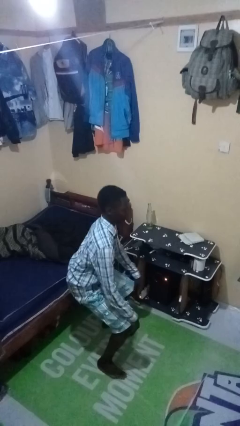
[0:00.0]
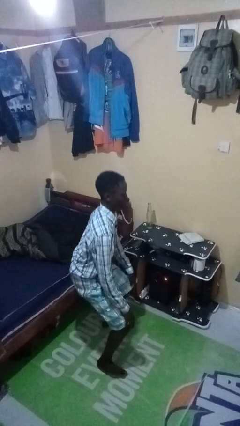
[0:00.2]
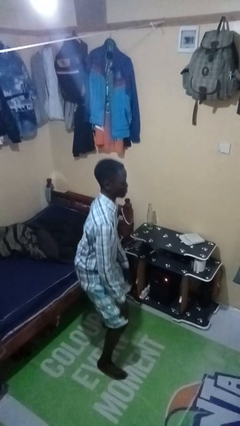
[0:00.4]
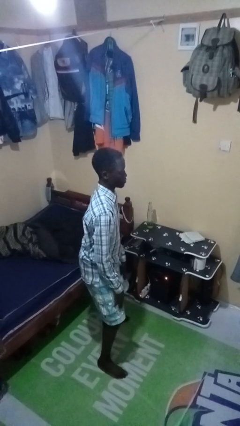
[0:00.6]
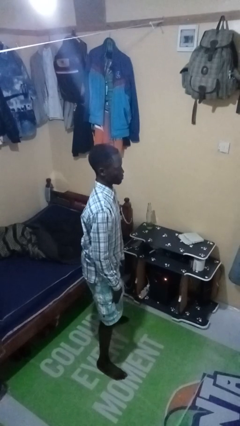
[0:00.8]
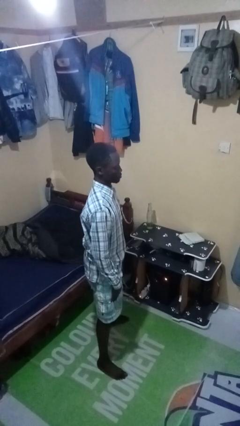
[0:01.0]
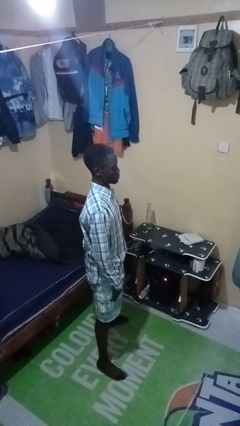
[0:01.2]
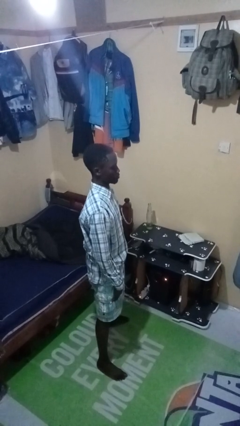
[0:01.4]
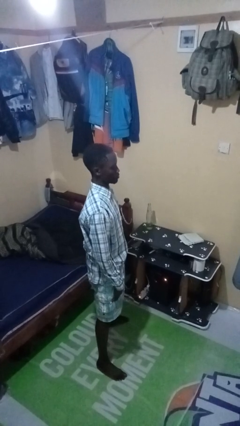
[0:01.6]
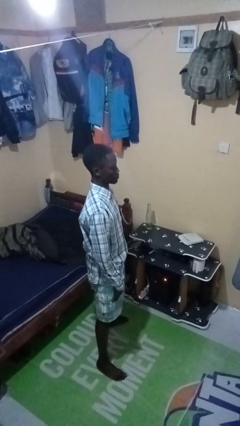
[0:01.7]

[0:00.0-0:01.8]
person stands up

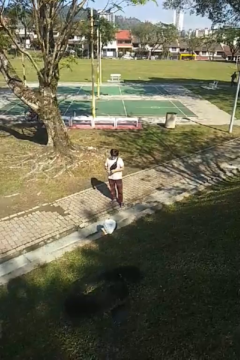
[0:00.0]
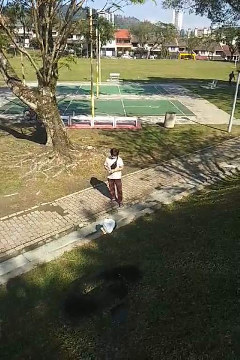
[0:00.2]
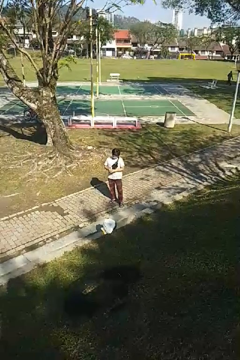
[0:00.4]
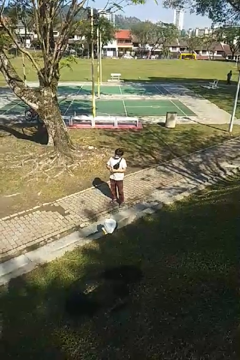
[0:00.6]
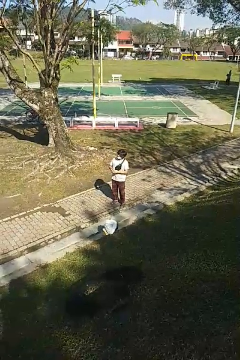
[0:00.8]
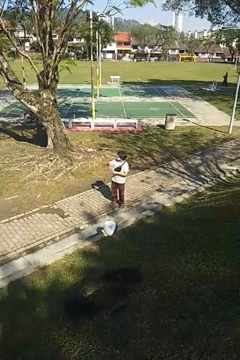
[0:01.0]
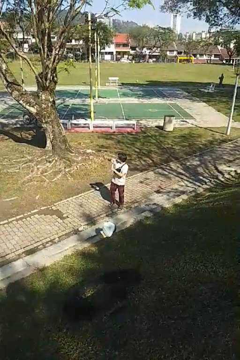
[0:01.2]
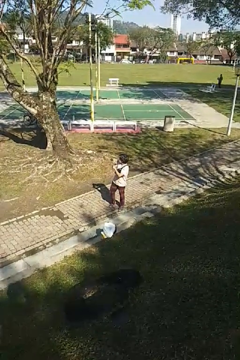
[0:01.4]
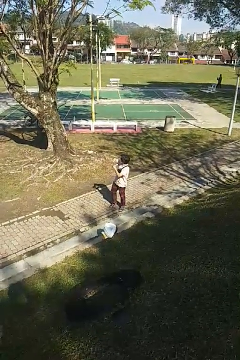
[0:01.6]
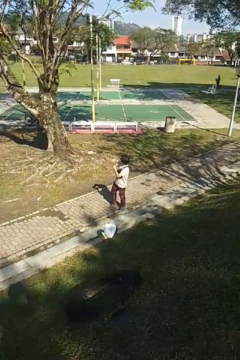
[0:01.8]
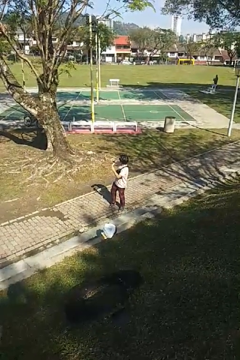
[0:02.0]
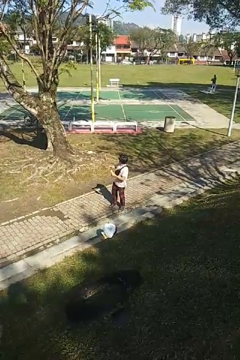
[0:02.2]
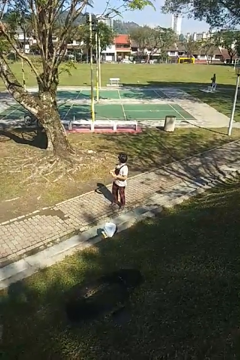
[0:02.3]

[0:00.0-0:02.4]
person applies deodorant

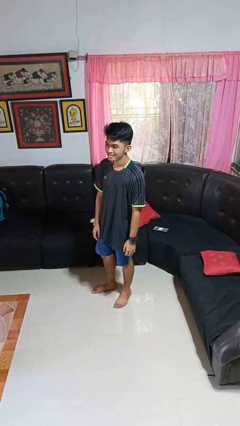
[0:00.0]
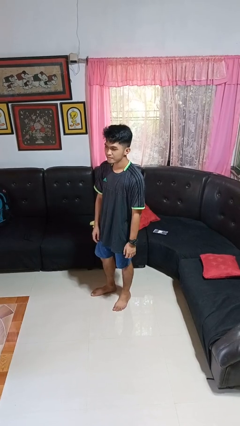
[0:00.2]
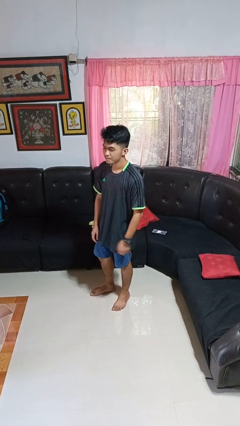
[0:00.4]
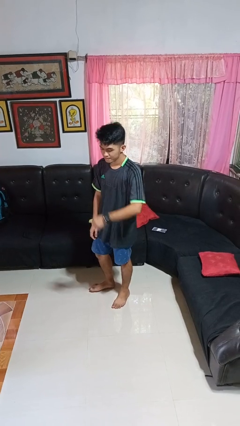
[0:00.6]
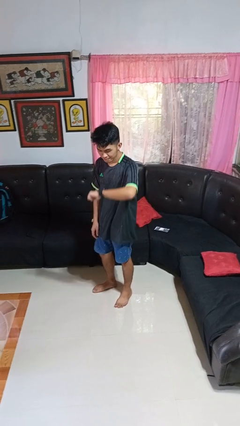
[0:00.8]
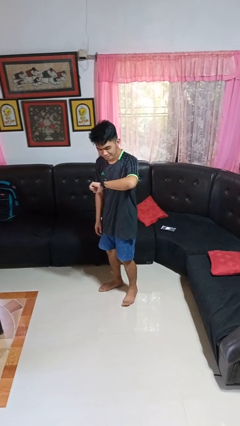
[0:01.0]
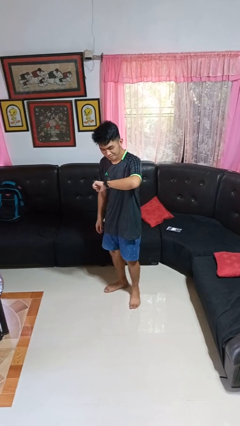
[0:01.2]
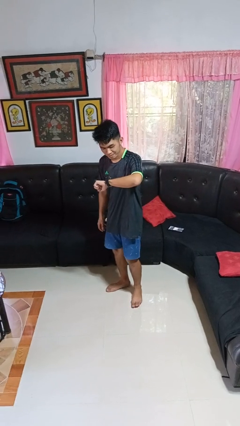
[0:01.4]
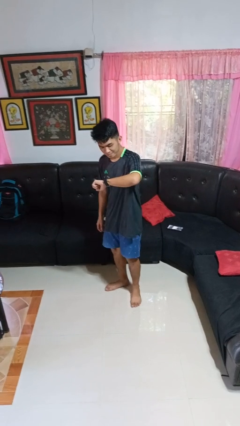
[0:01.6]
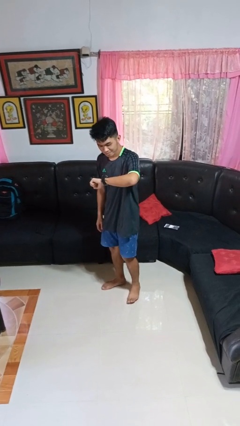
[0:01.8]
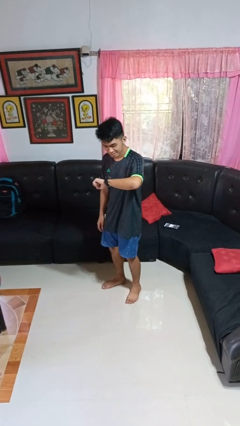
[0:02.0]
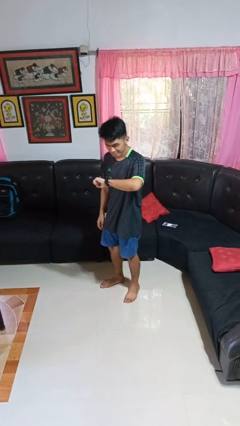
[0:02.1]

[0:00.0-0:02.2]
person looks at wristwatch

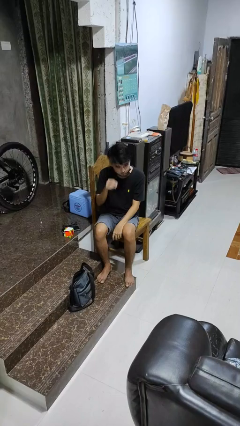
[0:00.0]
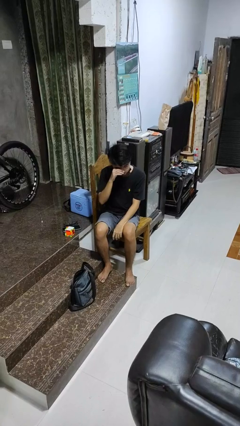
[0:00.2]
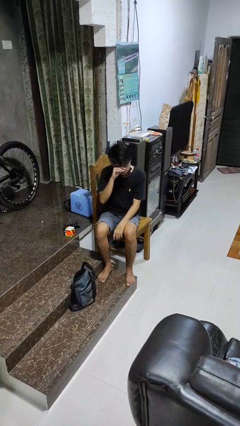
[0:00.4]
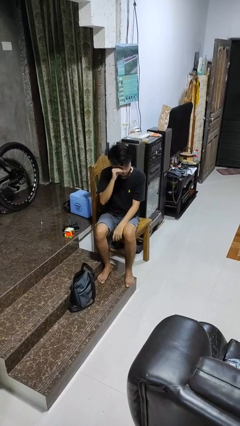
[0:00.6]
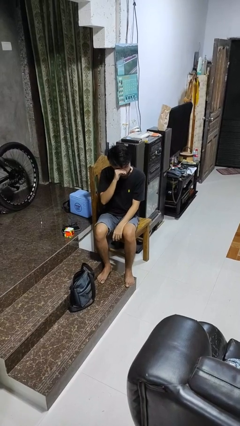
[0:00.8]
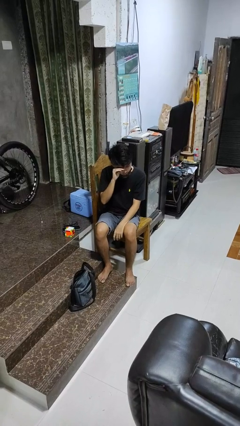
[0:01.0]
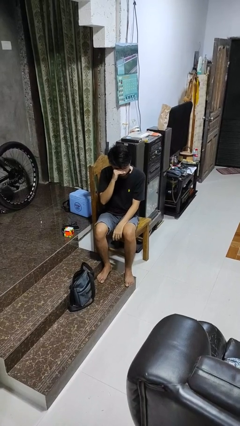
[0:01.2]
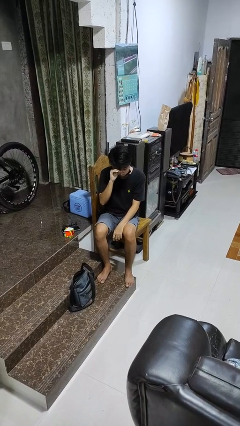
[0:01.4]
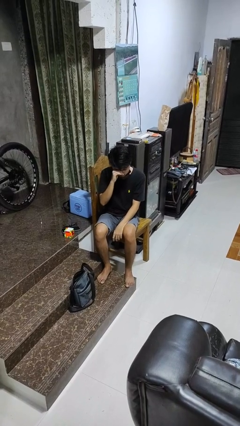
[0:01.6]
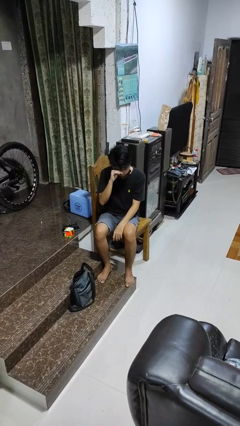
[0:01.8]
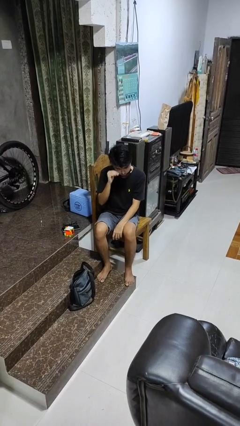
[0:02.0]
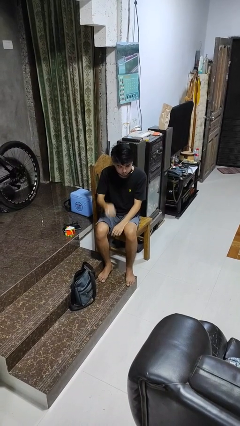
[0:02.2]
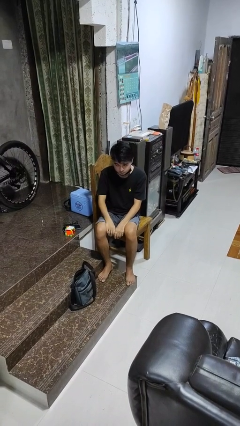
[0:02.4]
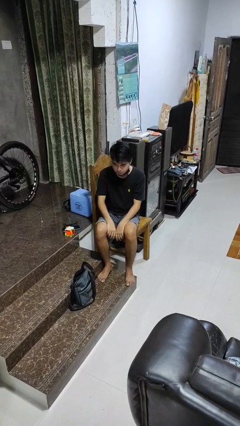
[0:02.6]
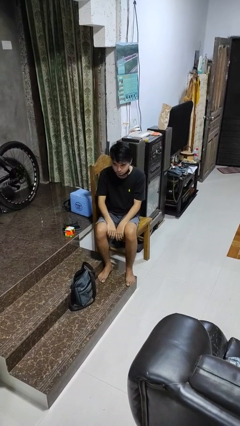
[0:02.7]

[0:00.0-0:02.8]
person rubs eyes

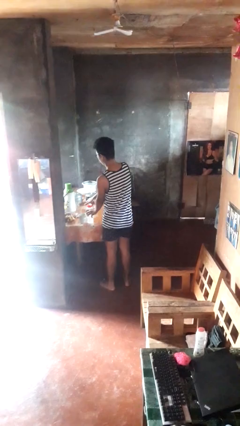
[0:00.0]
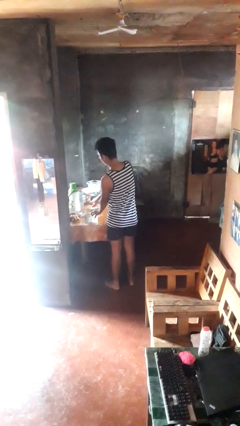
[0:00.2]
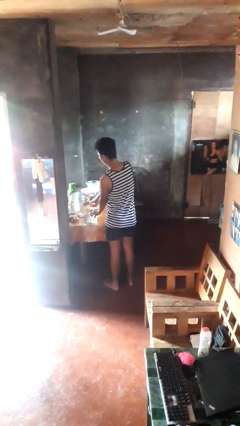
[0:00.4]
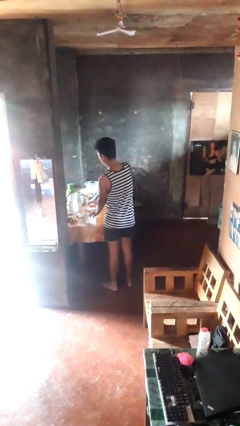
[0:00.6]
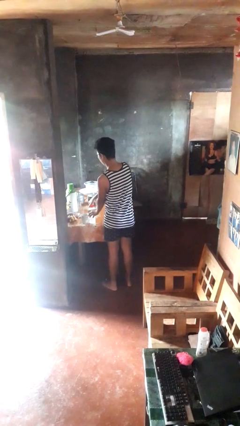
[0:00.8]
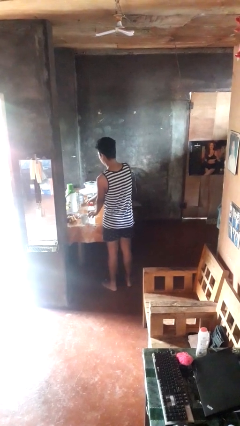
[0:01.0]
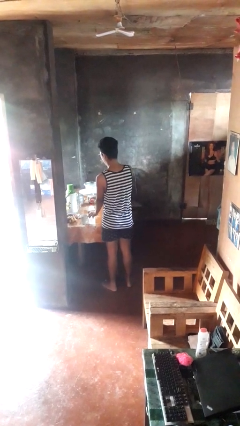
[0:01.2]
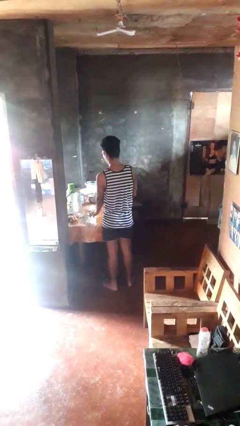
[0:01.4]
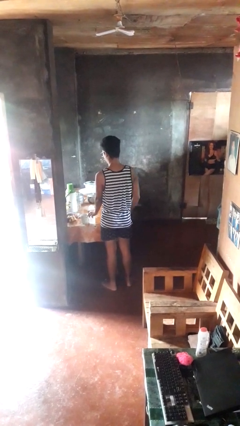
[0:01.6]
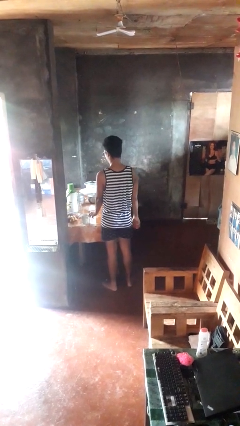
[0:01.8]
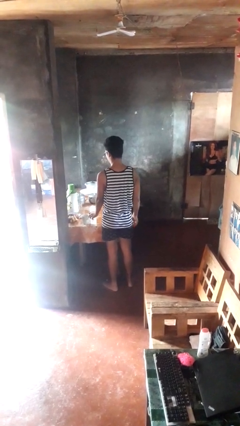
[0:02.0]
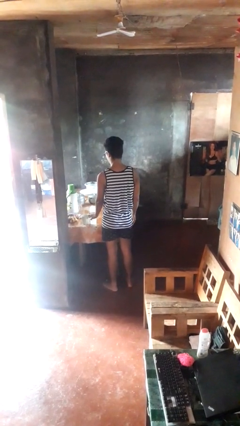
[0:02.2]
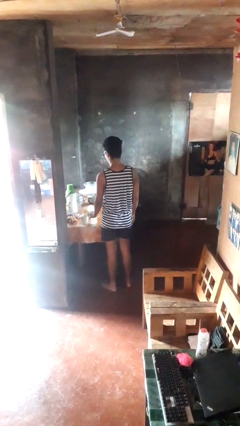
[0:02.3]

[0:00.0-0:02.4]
person unscrews lid from bottle

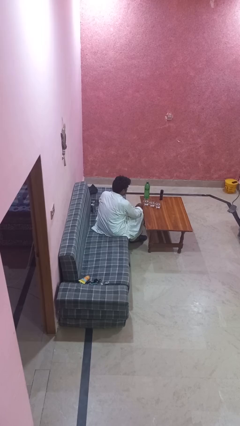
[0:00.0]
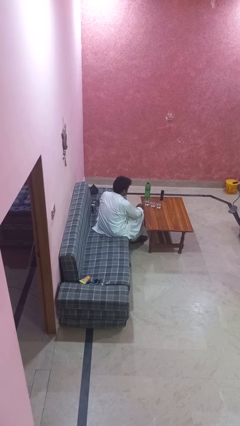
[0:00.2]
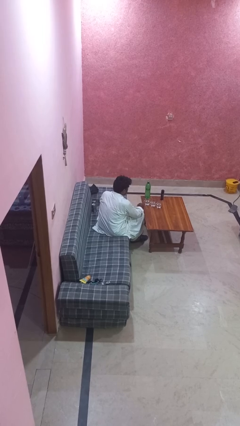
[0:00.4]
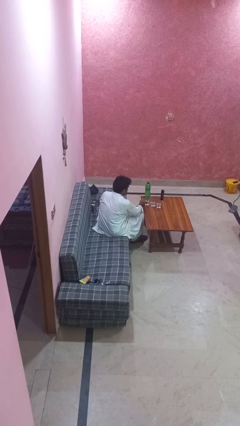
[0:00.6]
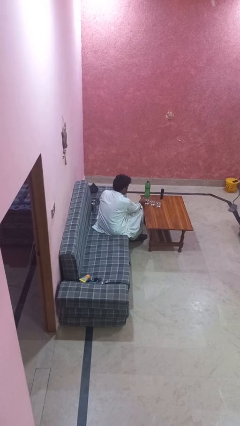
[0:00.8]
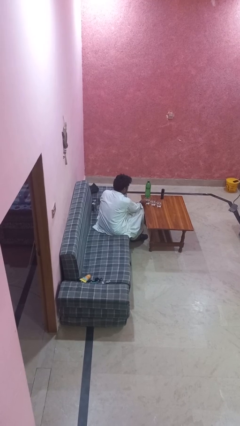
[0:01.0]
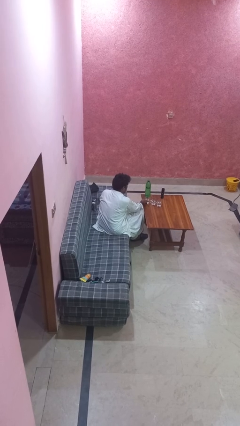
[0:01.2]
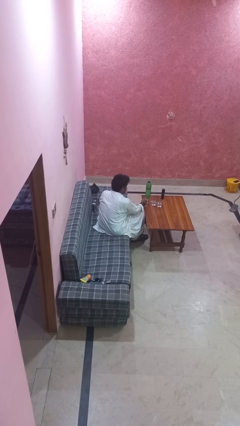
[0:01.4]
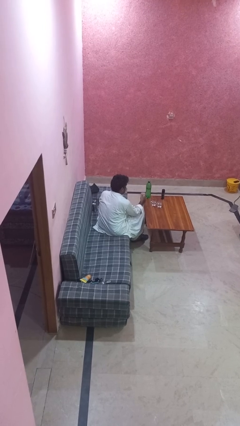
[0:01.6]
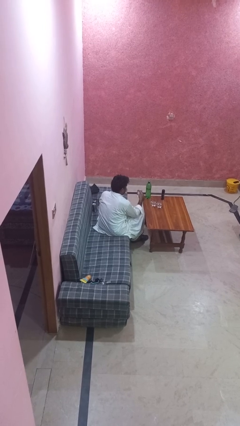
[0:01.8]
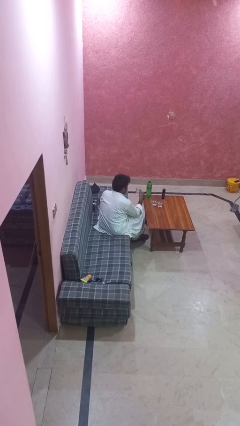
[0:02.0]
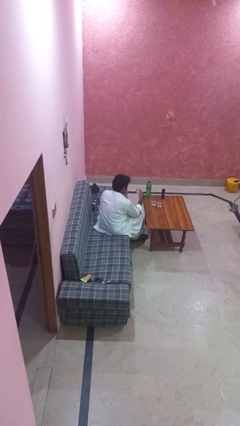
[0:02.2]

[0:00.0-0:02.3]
person picks up object from table

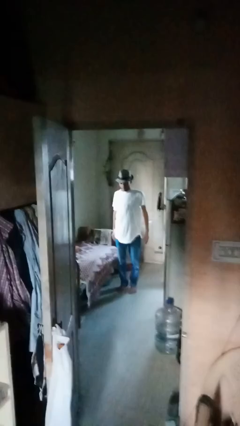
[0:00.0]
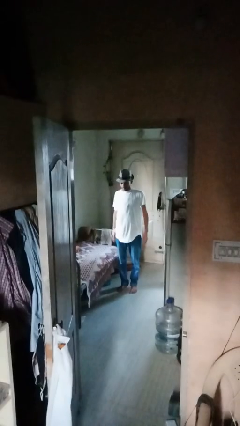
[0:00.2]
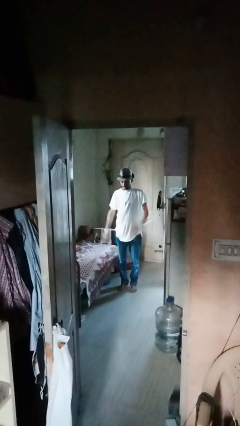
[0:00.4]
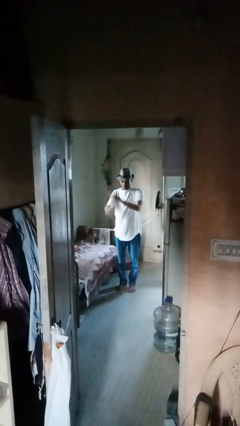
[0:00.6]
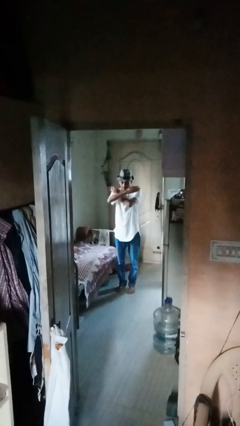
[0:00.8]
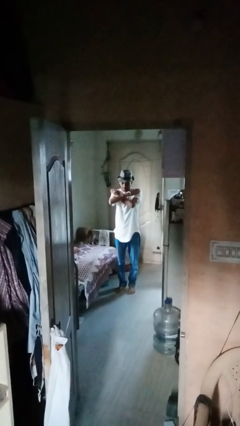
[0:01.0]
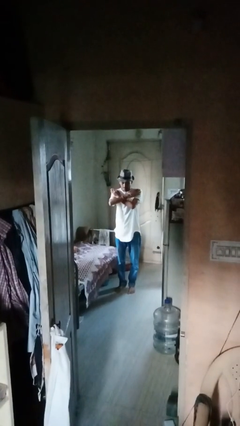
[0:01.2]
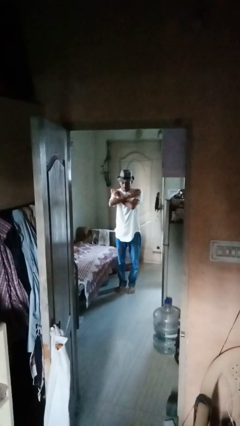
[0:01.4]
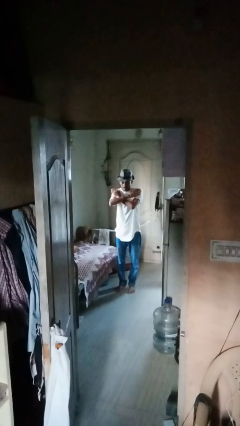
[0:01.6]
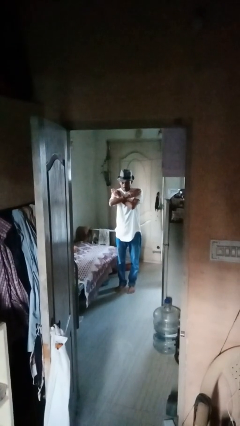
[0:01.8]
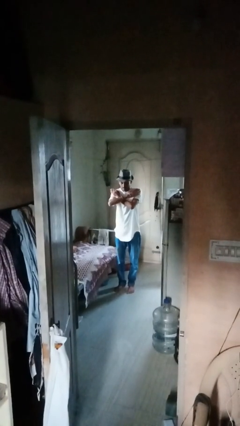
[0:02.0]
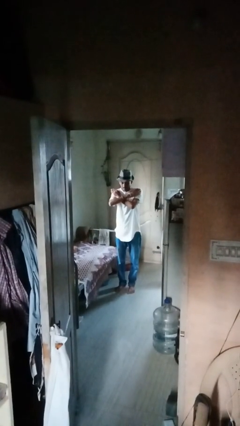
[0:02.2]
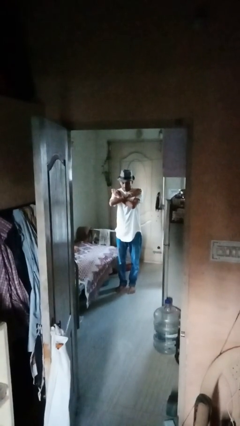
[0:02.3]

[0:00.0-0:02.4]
person gestures arms x

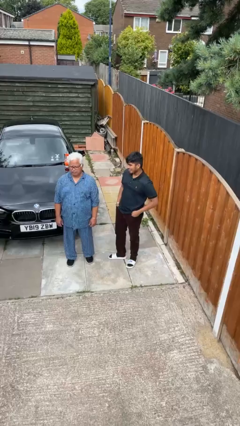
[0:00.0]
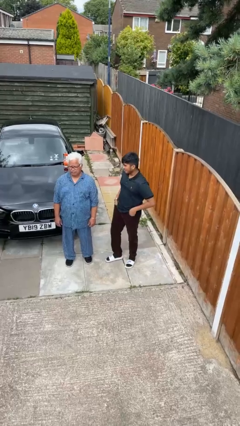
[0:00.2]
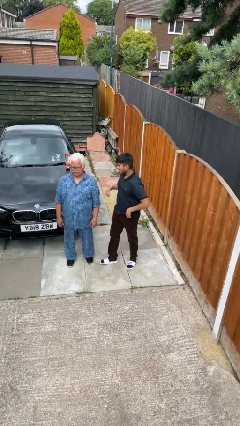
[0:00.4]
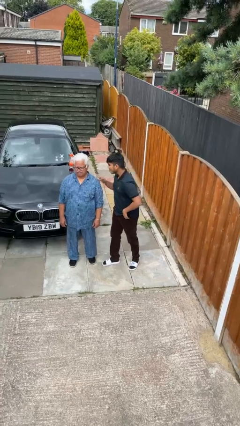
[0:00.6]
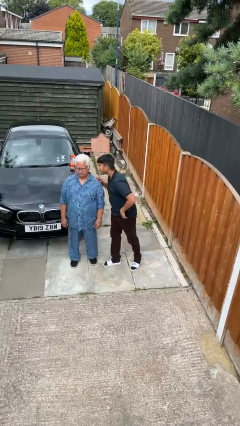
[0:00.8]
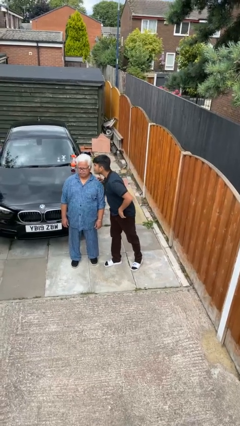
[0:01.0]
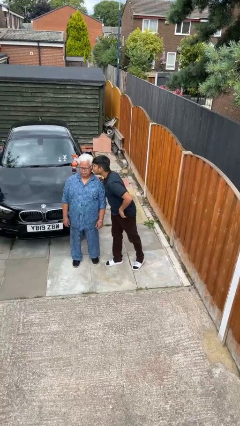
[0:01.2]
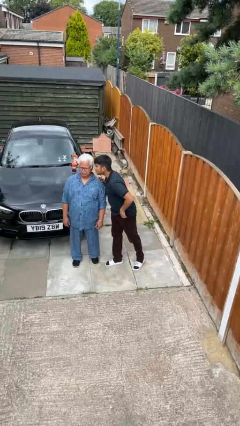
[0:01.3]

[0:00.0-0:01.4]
person kisses cheek of person
